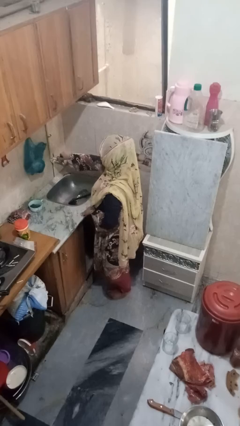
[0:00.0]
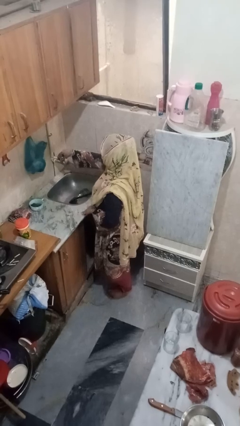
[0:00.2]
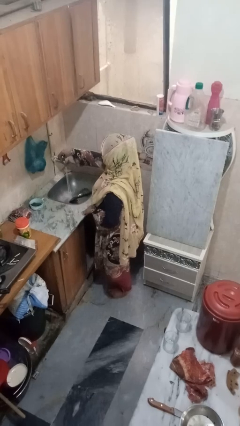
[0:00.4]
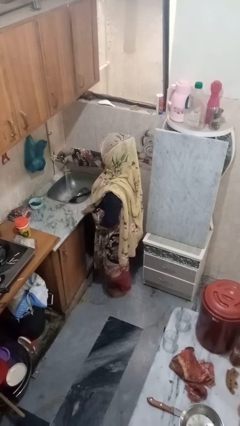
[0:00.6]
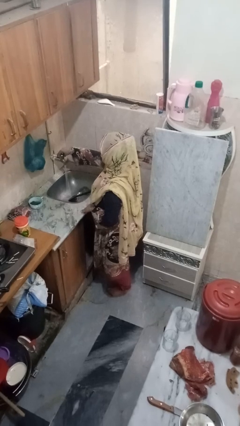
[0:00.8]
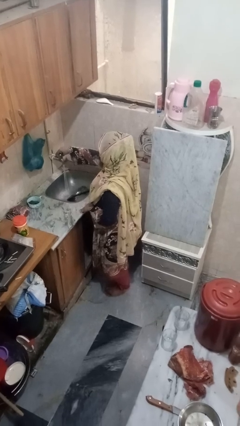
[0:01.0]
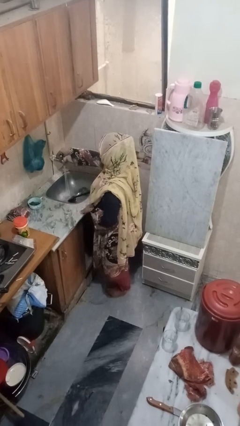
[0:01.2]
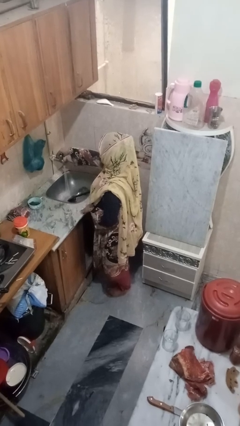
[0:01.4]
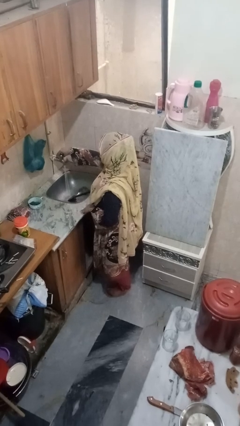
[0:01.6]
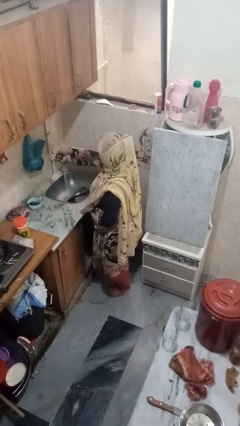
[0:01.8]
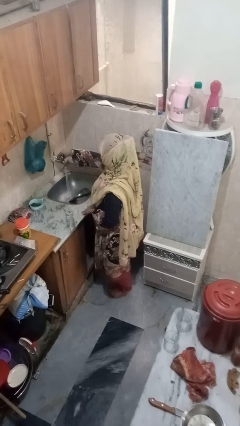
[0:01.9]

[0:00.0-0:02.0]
person turns on faucet

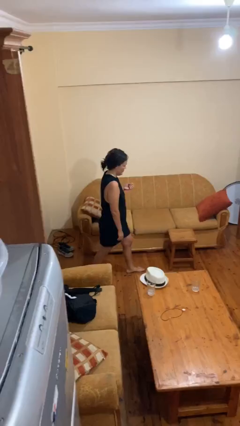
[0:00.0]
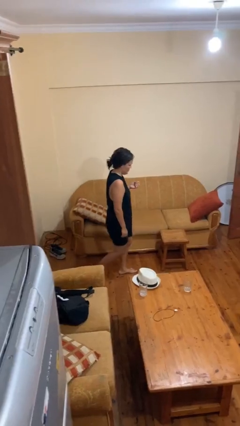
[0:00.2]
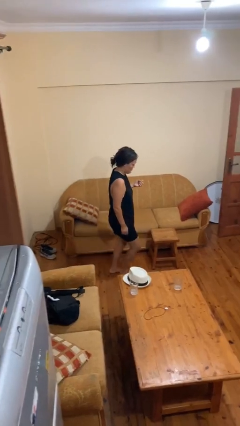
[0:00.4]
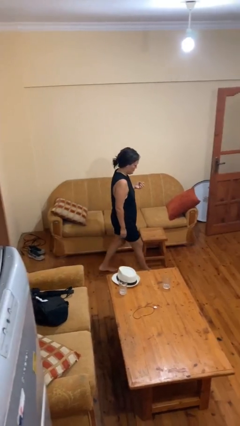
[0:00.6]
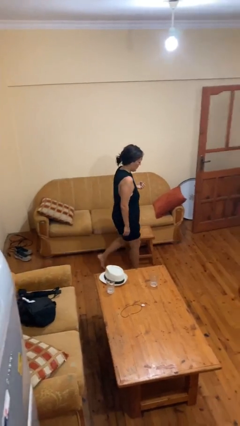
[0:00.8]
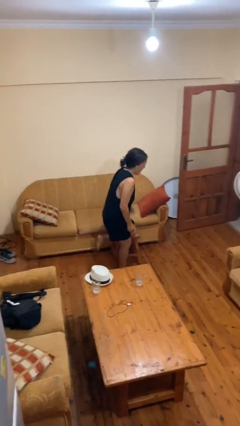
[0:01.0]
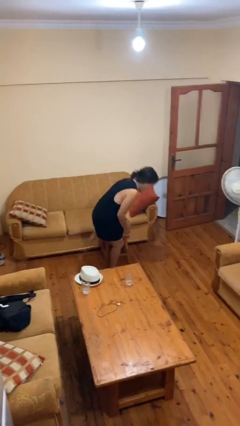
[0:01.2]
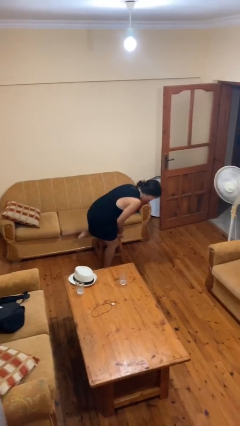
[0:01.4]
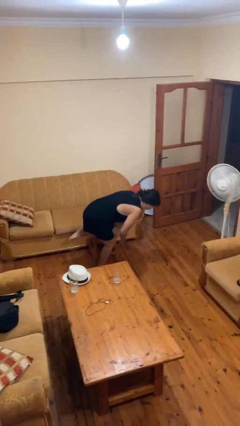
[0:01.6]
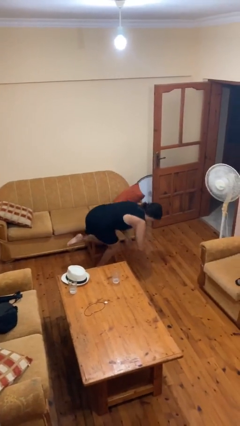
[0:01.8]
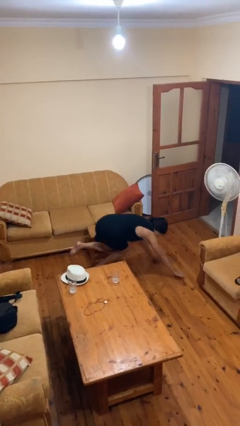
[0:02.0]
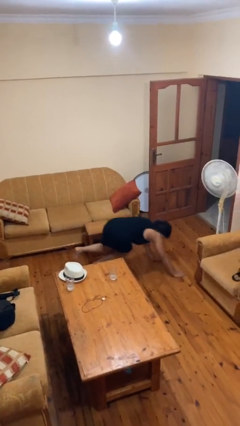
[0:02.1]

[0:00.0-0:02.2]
person trips on object on floor

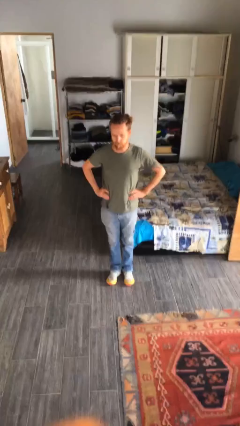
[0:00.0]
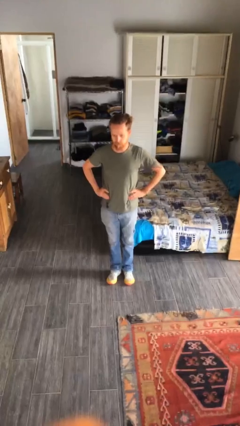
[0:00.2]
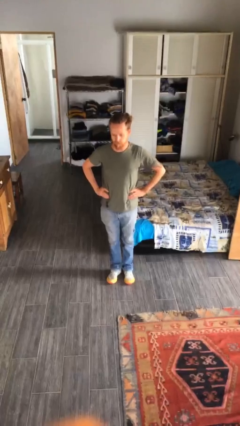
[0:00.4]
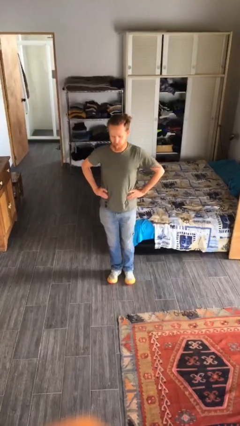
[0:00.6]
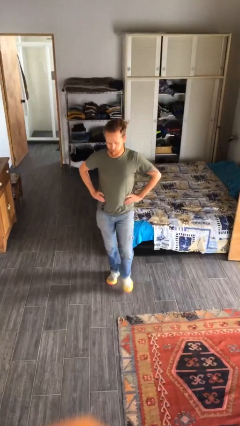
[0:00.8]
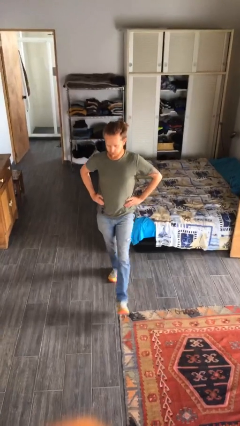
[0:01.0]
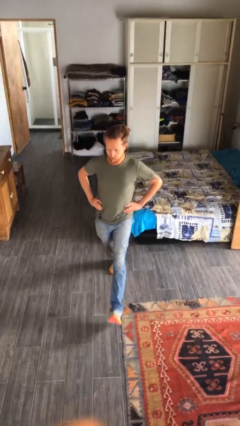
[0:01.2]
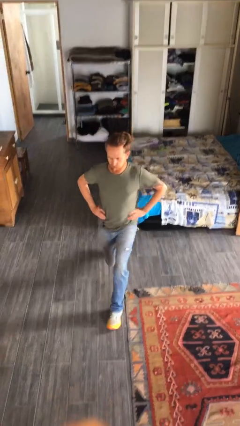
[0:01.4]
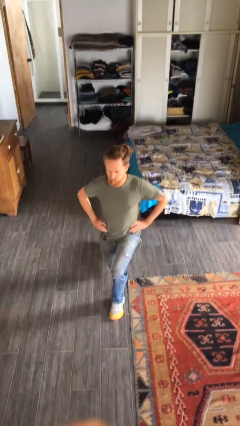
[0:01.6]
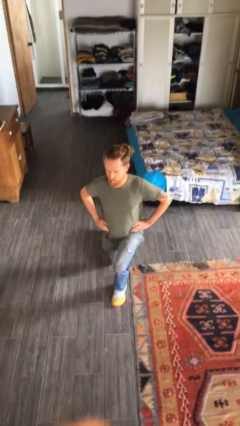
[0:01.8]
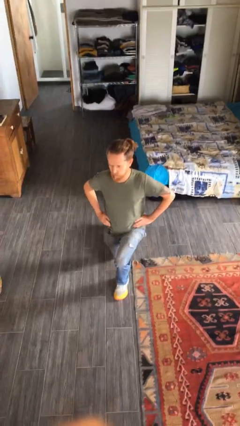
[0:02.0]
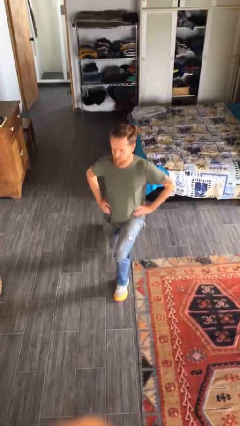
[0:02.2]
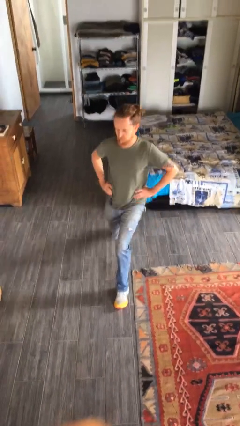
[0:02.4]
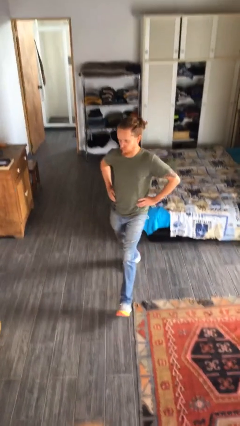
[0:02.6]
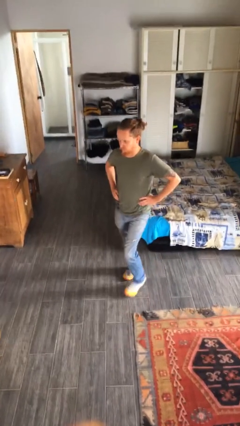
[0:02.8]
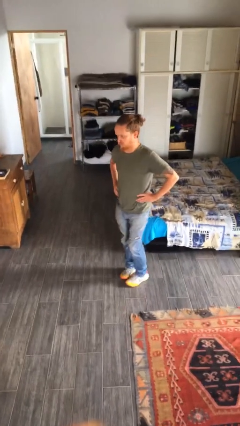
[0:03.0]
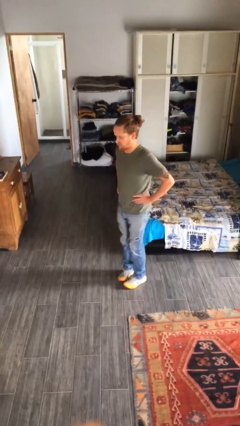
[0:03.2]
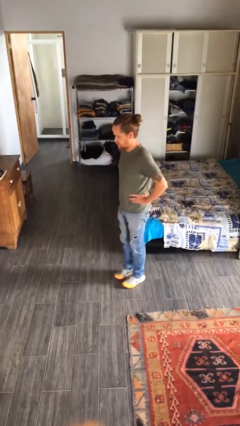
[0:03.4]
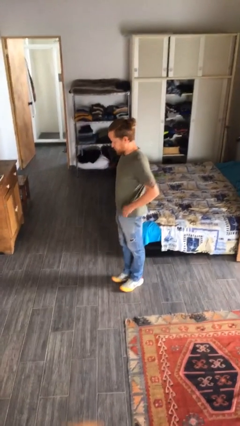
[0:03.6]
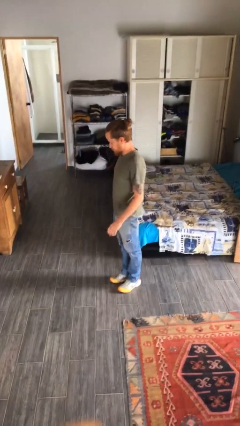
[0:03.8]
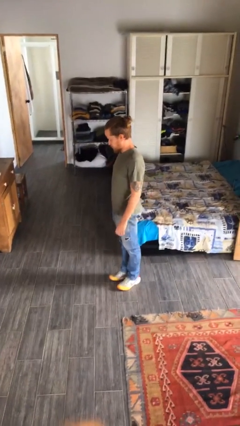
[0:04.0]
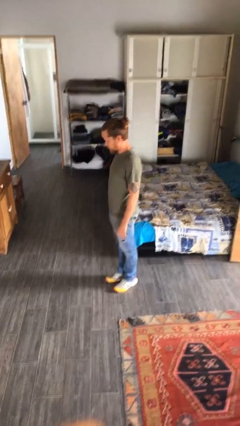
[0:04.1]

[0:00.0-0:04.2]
person exercises with lunges

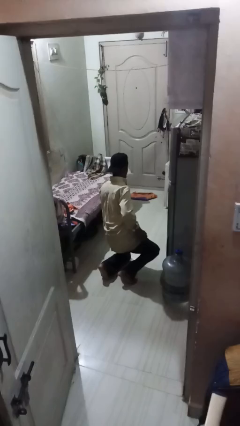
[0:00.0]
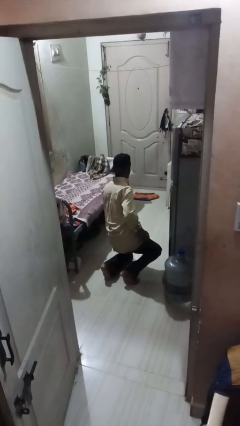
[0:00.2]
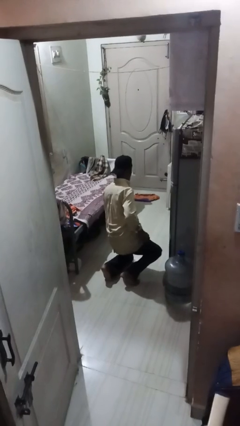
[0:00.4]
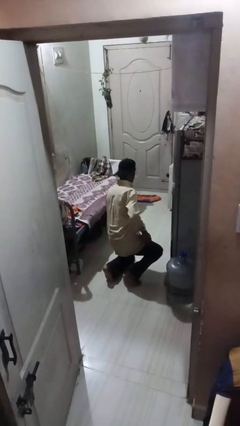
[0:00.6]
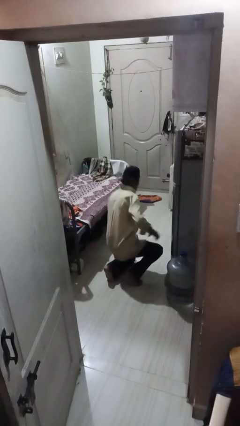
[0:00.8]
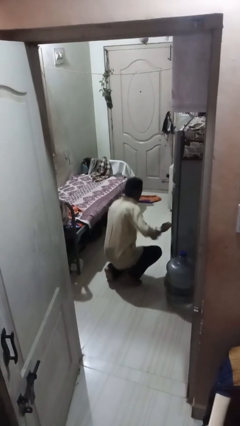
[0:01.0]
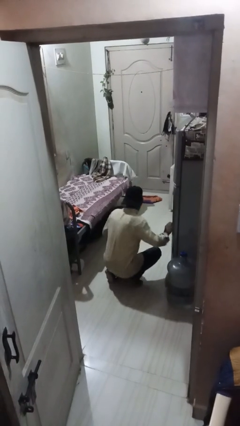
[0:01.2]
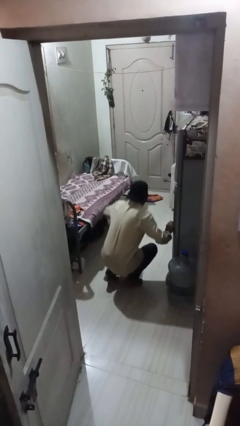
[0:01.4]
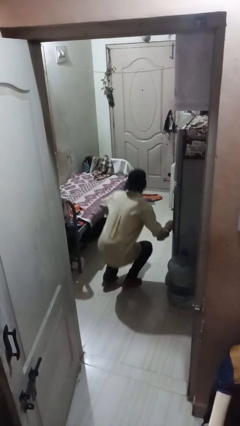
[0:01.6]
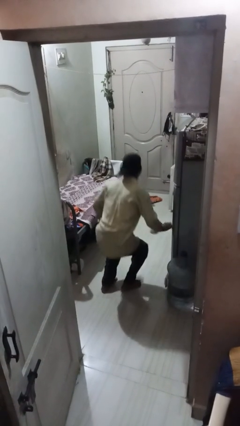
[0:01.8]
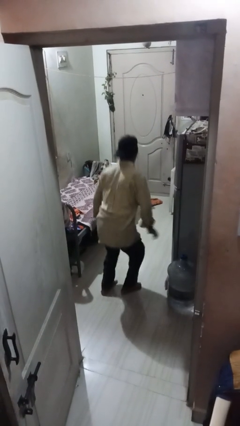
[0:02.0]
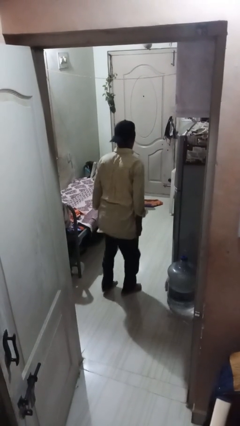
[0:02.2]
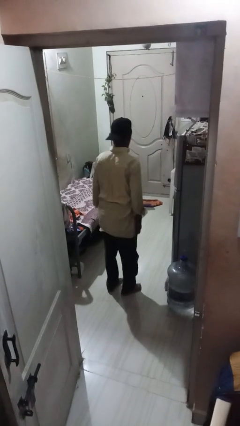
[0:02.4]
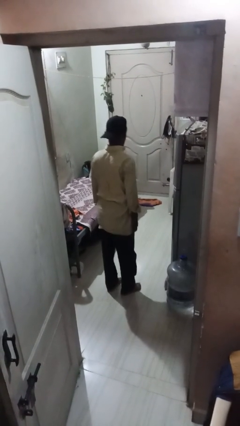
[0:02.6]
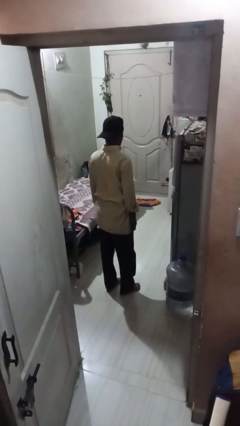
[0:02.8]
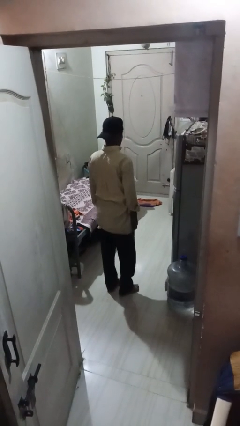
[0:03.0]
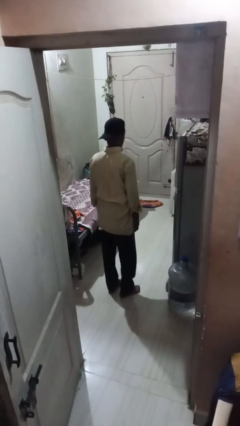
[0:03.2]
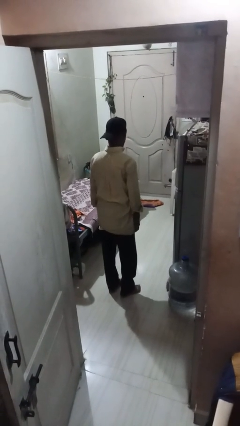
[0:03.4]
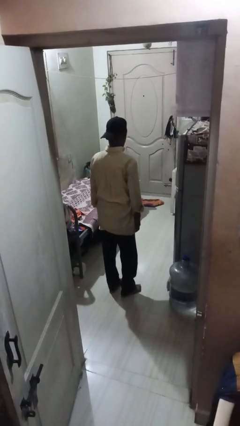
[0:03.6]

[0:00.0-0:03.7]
person stands up from floor

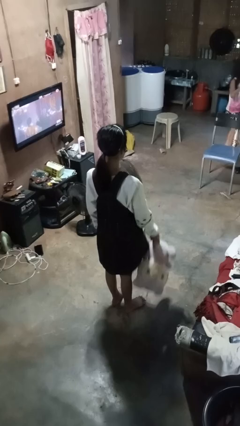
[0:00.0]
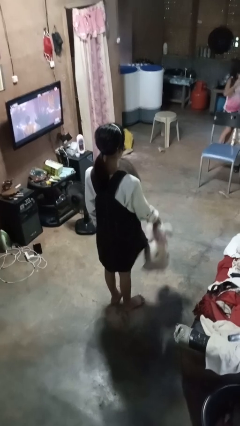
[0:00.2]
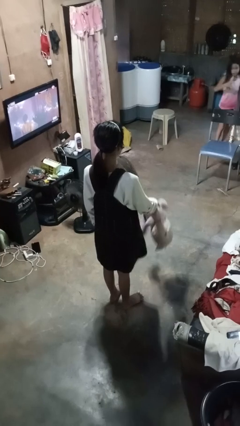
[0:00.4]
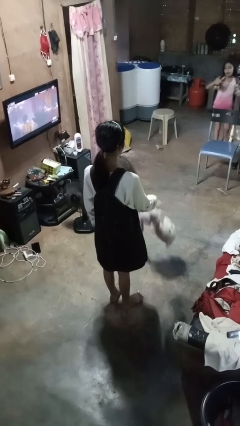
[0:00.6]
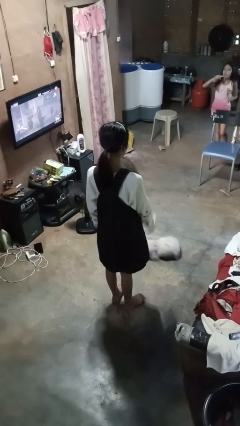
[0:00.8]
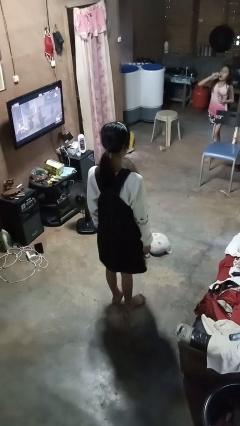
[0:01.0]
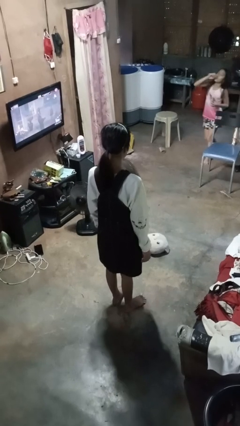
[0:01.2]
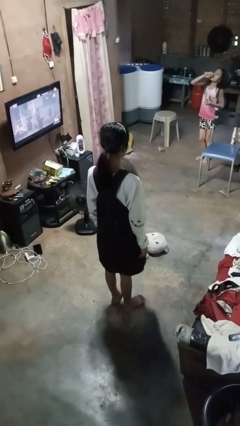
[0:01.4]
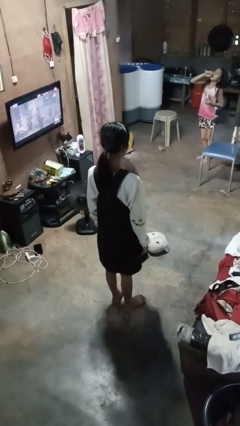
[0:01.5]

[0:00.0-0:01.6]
person throws object to ground

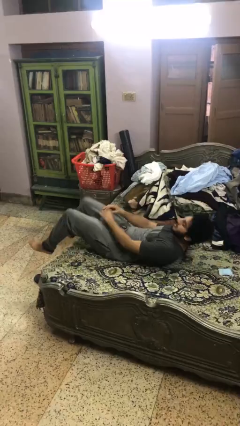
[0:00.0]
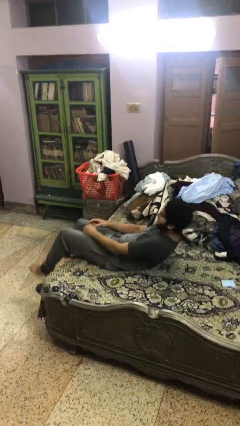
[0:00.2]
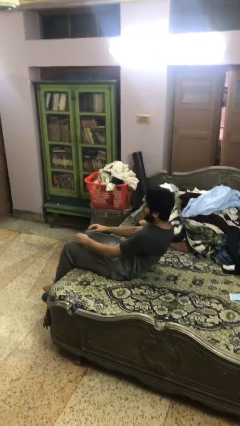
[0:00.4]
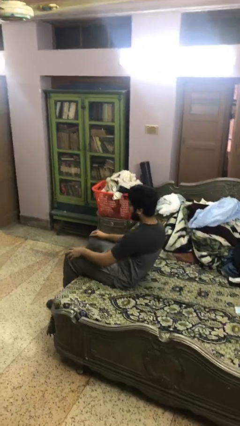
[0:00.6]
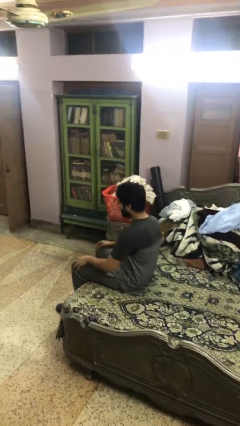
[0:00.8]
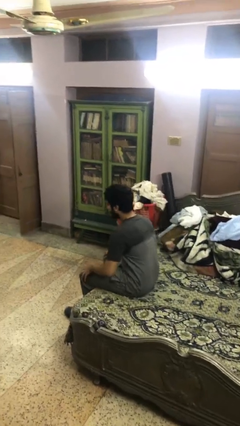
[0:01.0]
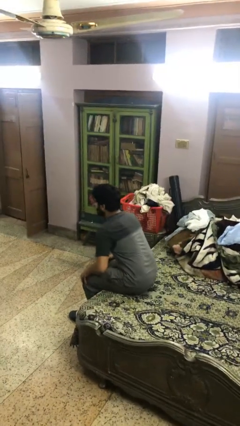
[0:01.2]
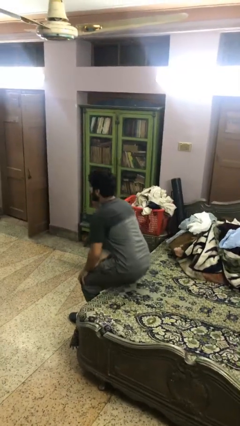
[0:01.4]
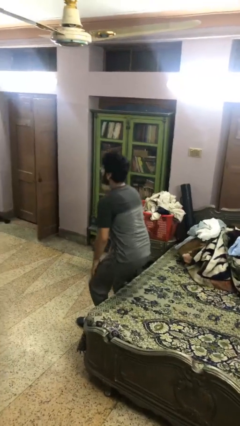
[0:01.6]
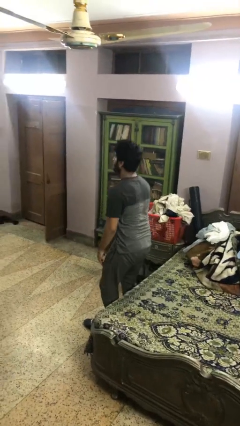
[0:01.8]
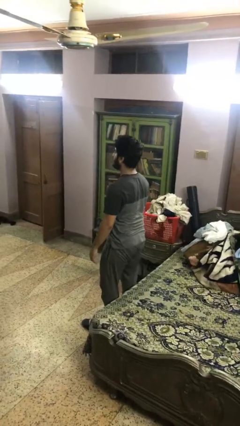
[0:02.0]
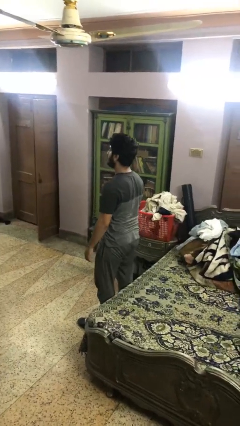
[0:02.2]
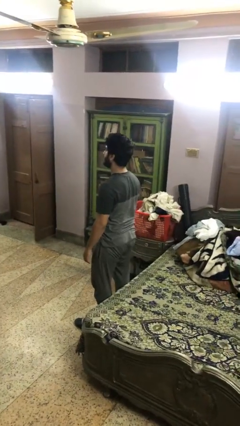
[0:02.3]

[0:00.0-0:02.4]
person stands up

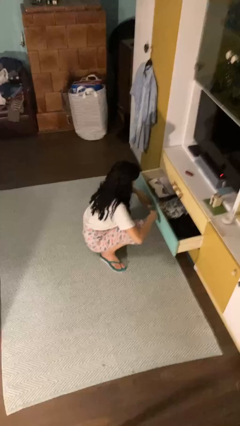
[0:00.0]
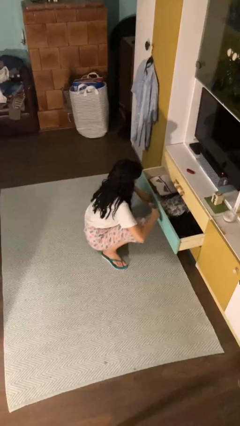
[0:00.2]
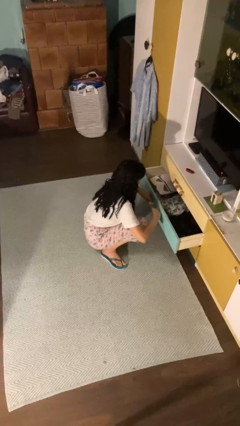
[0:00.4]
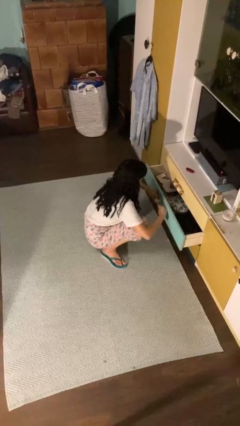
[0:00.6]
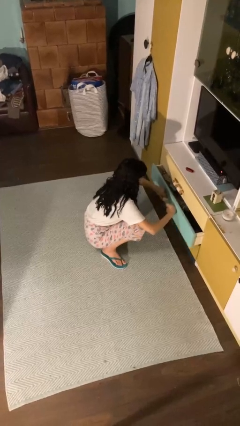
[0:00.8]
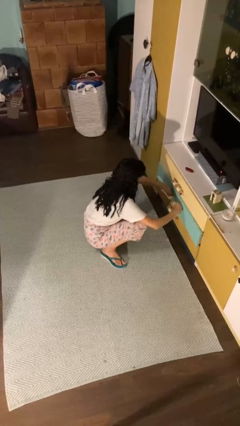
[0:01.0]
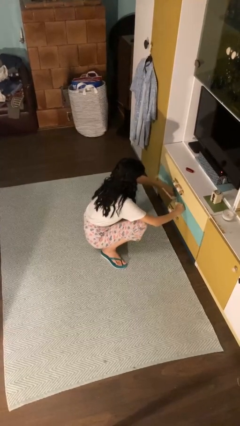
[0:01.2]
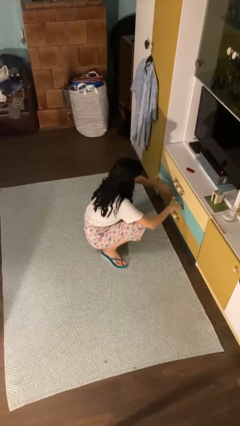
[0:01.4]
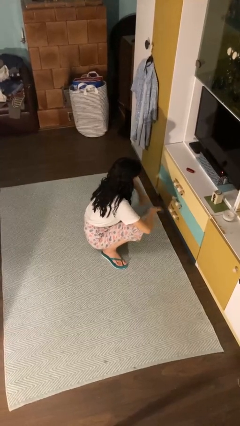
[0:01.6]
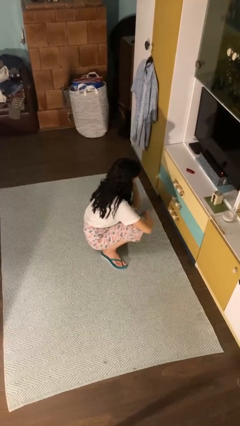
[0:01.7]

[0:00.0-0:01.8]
person closes dresser drawer
